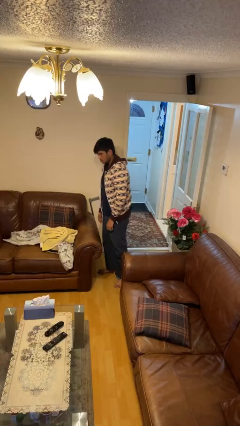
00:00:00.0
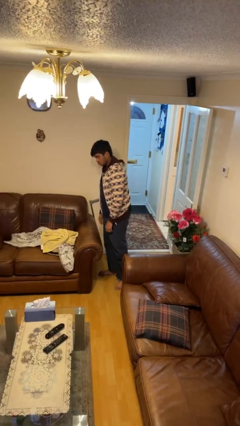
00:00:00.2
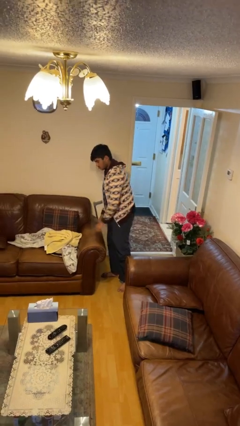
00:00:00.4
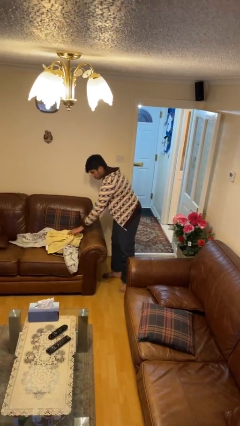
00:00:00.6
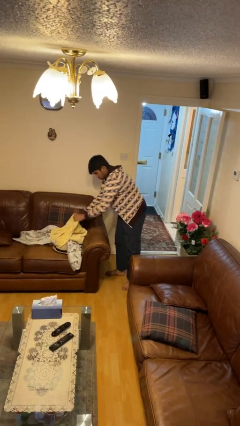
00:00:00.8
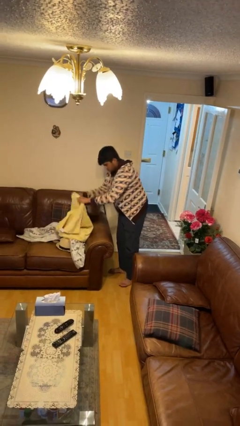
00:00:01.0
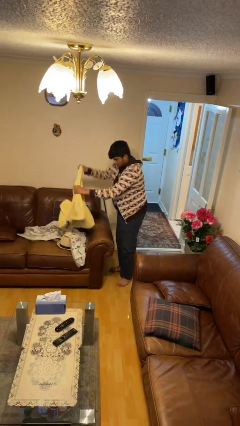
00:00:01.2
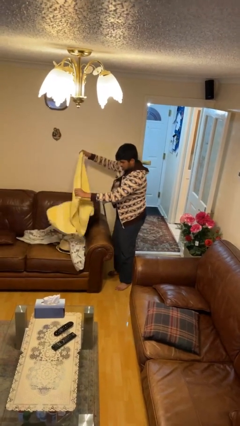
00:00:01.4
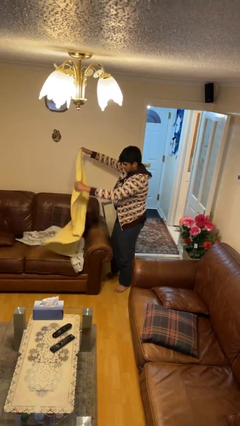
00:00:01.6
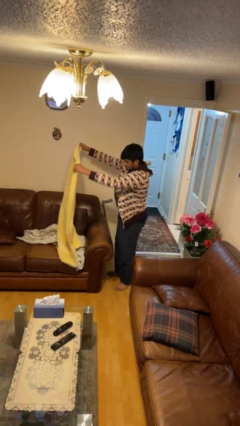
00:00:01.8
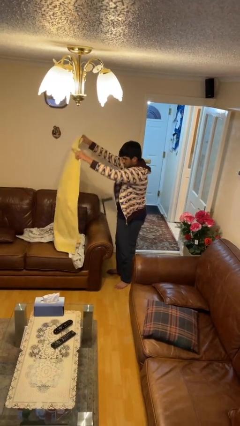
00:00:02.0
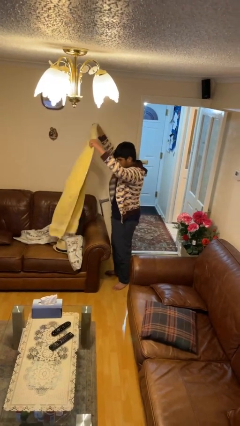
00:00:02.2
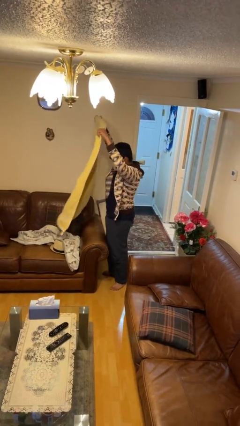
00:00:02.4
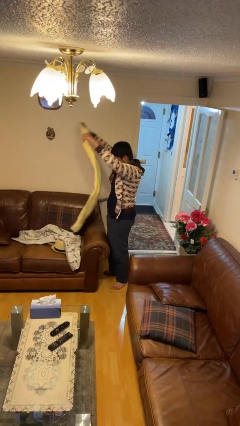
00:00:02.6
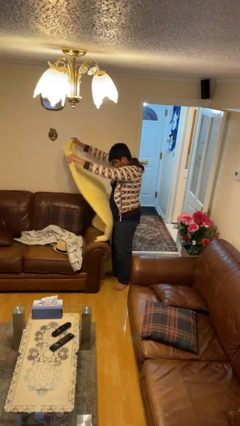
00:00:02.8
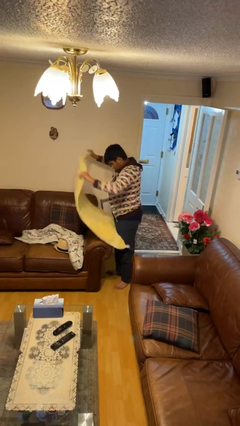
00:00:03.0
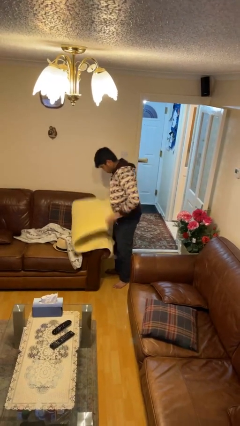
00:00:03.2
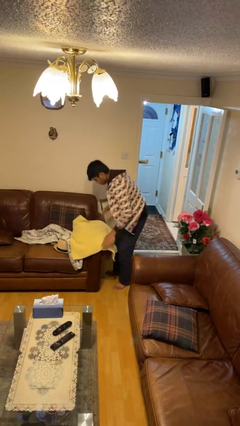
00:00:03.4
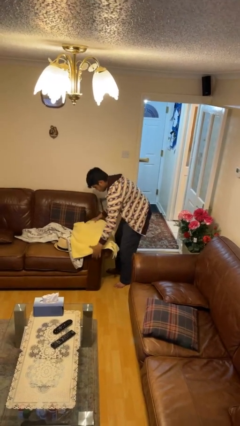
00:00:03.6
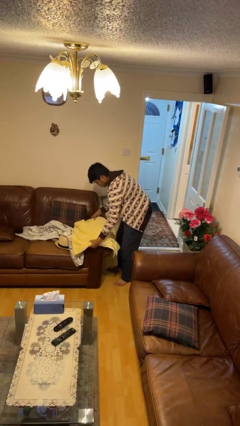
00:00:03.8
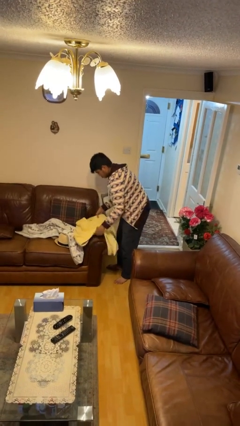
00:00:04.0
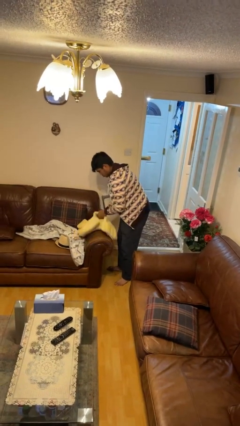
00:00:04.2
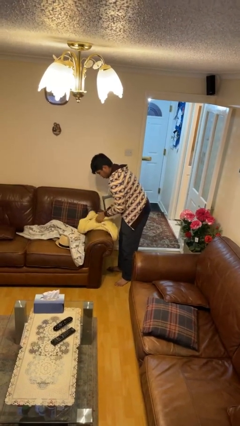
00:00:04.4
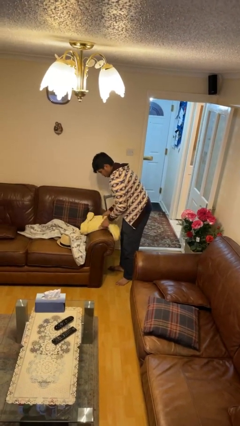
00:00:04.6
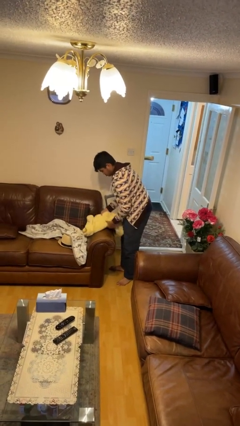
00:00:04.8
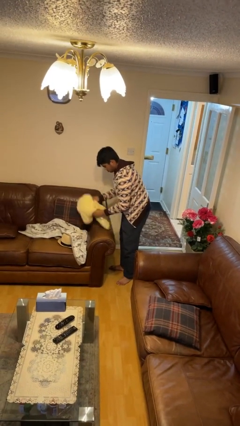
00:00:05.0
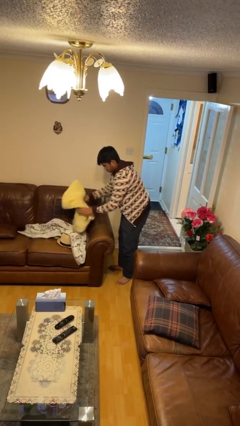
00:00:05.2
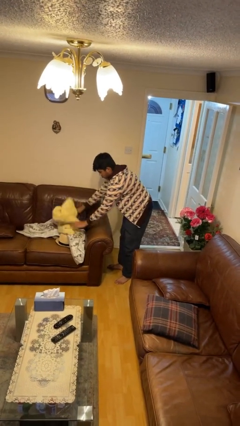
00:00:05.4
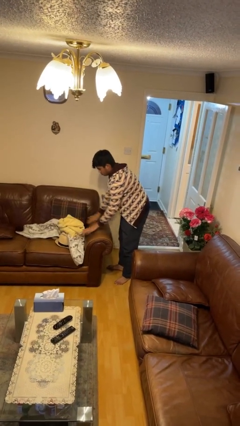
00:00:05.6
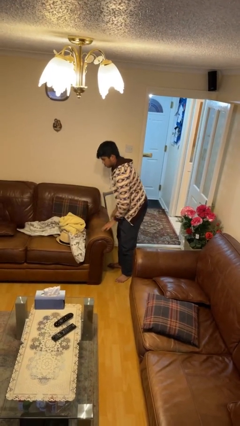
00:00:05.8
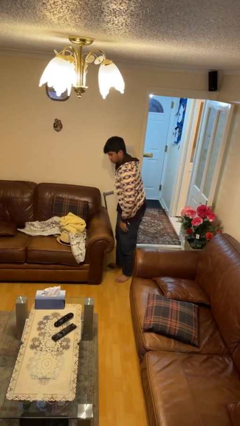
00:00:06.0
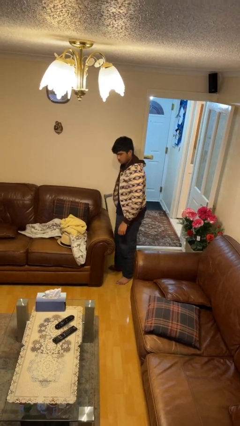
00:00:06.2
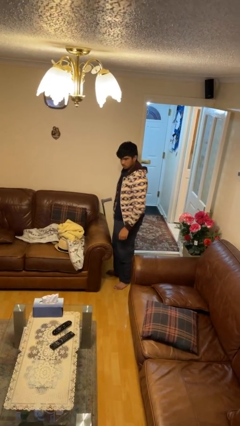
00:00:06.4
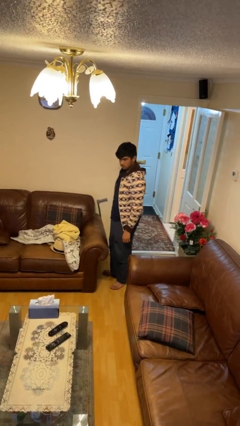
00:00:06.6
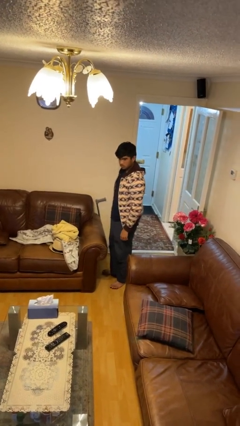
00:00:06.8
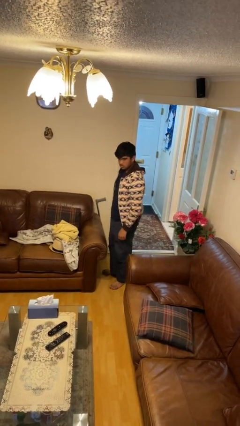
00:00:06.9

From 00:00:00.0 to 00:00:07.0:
person folds towel

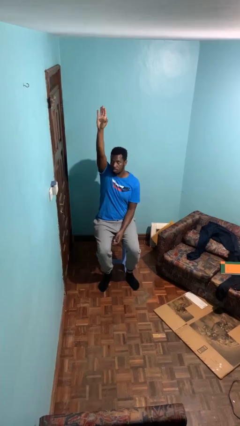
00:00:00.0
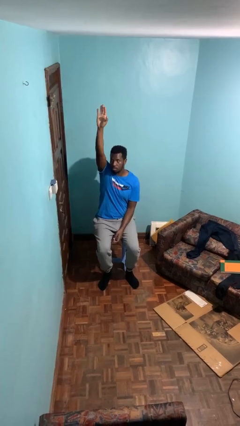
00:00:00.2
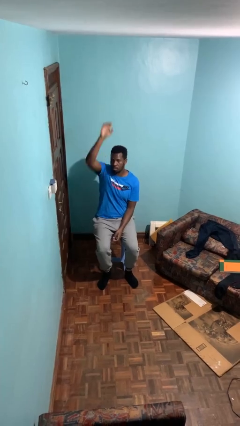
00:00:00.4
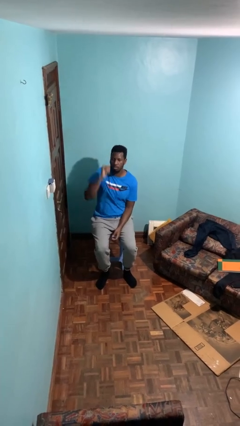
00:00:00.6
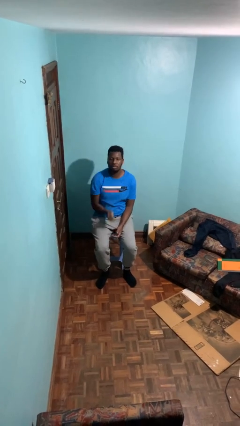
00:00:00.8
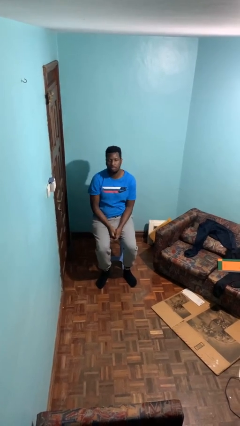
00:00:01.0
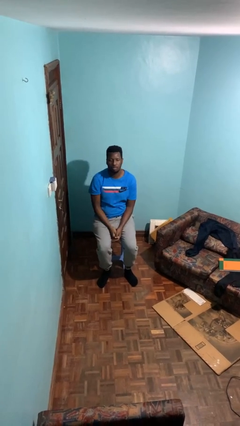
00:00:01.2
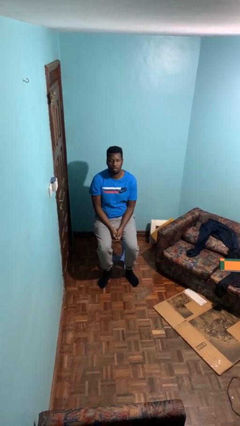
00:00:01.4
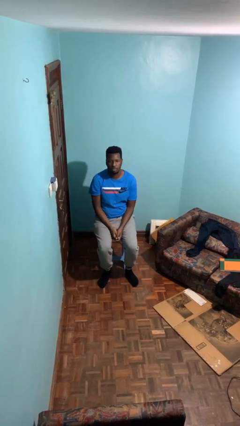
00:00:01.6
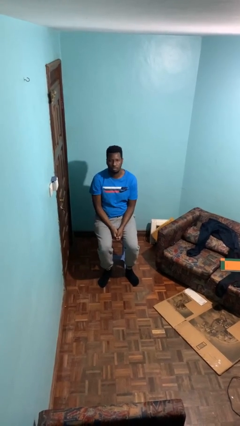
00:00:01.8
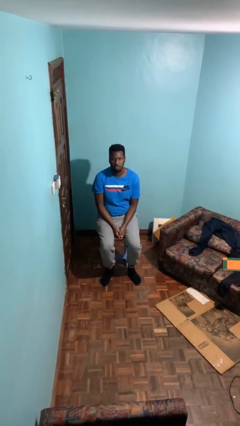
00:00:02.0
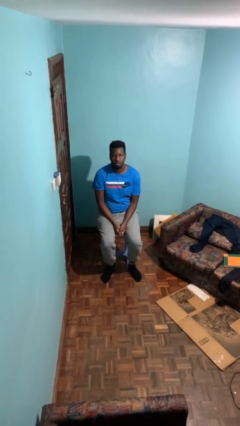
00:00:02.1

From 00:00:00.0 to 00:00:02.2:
person gestures lower hand

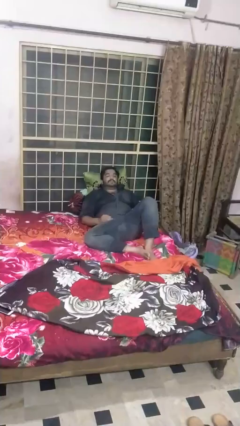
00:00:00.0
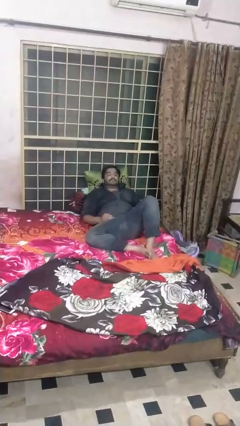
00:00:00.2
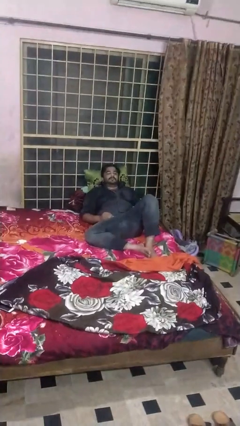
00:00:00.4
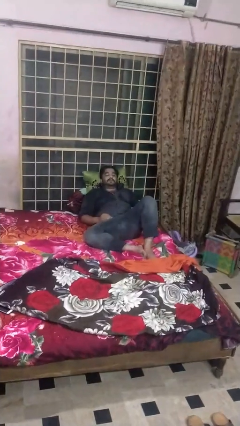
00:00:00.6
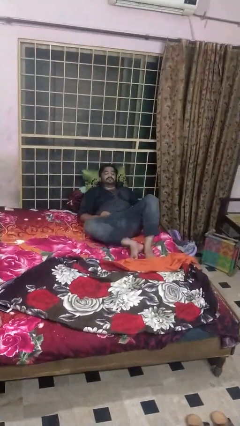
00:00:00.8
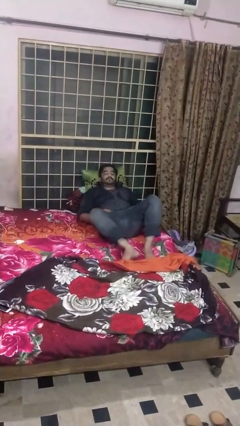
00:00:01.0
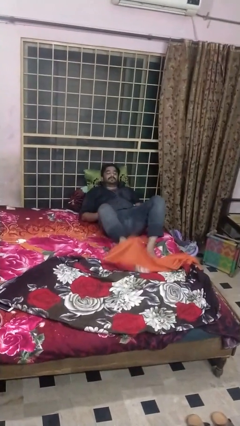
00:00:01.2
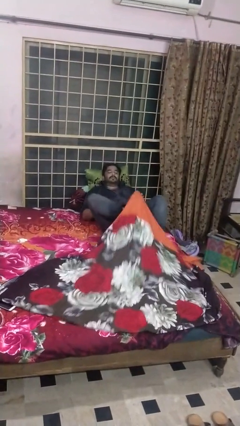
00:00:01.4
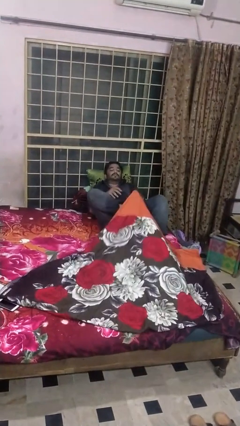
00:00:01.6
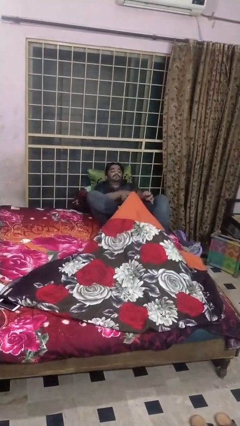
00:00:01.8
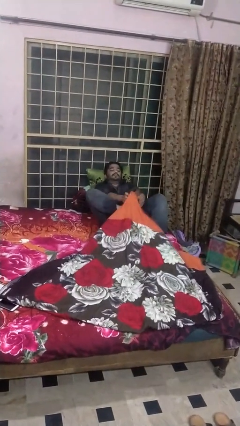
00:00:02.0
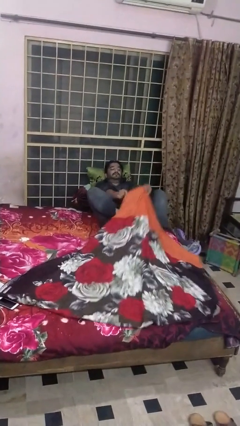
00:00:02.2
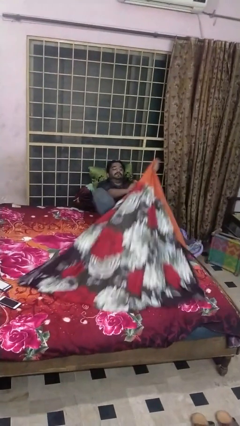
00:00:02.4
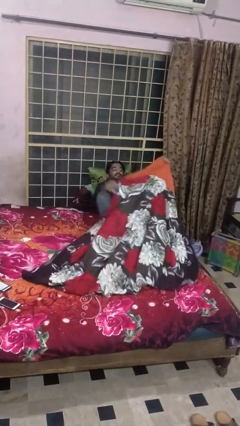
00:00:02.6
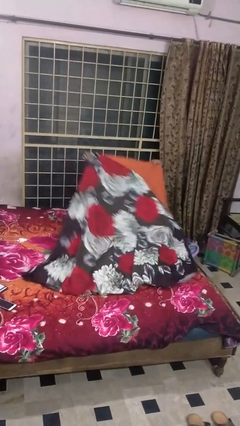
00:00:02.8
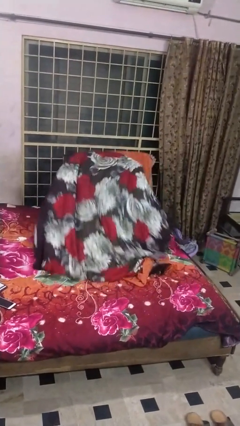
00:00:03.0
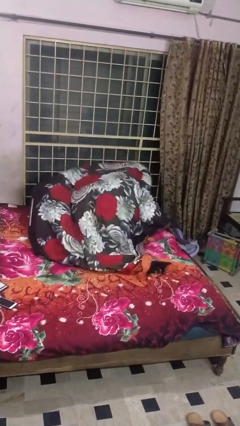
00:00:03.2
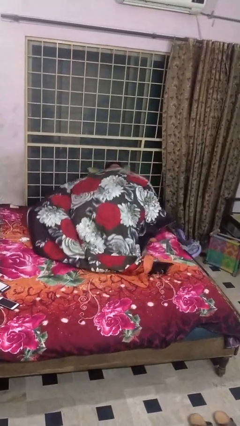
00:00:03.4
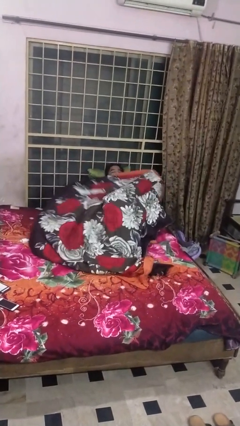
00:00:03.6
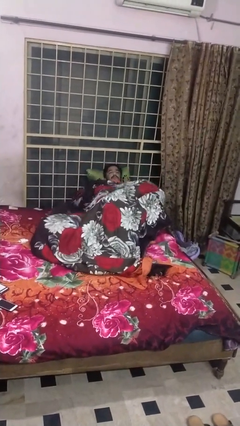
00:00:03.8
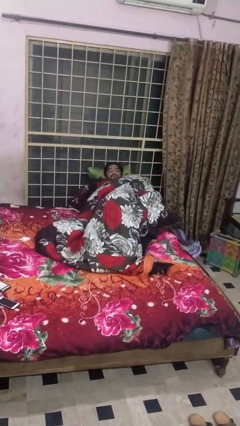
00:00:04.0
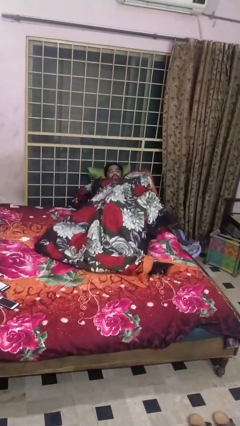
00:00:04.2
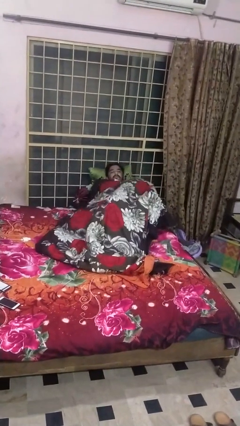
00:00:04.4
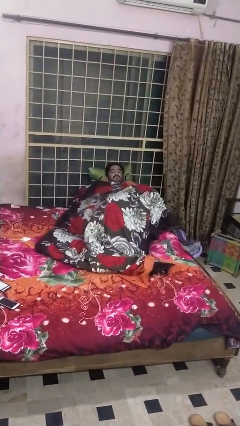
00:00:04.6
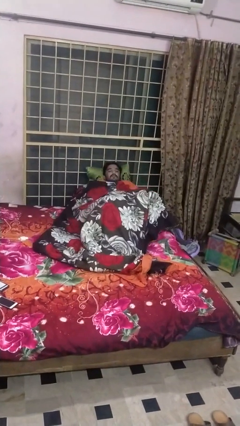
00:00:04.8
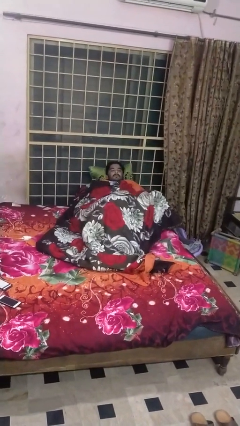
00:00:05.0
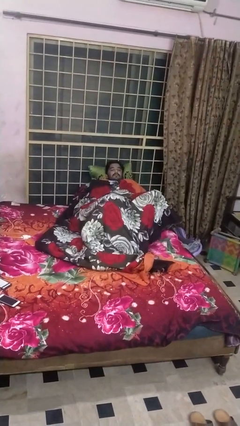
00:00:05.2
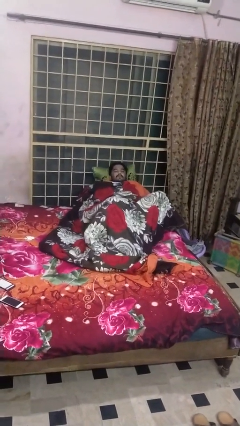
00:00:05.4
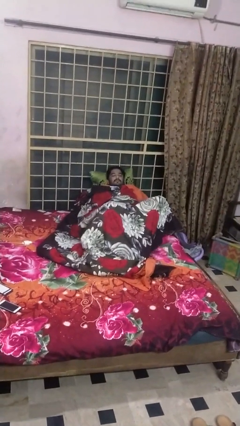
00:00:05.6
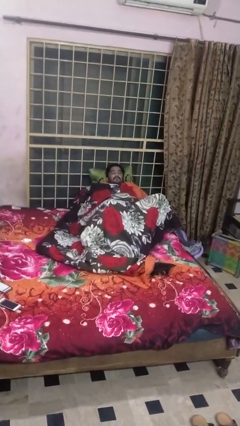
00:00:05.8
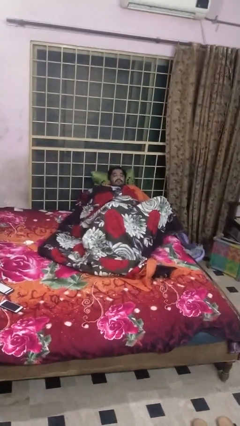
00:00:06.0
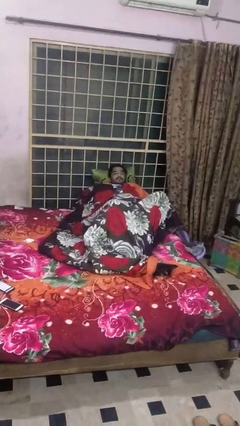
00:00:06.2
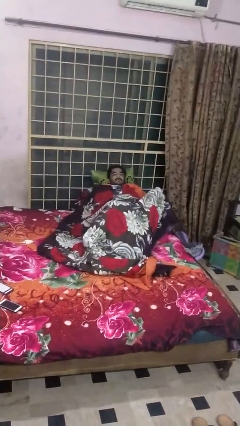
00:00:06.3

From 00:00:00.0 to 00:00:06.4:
person covers with bedsheets

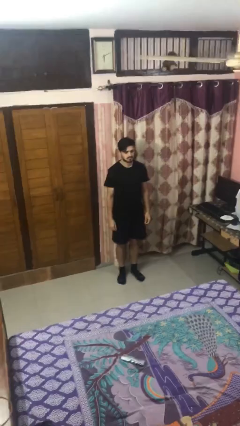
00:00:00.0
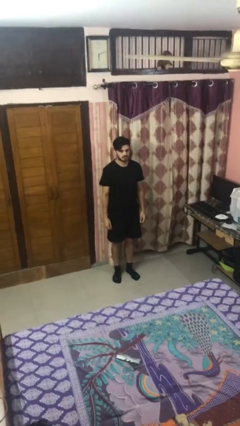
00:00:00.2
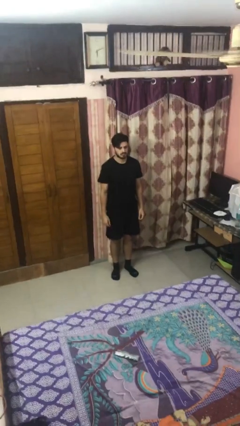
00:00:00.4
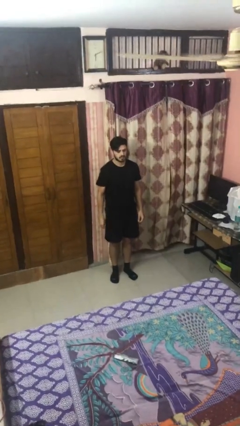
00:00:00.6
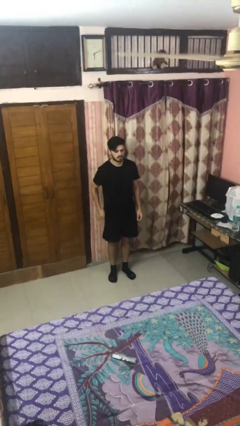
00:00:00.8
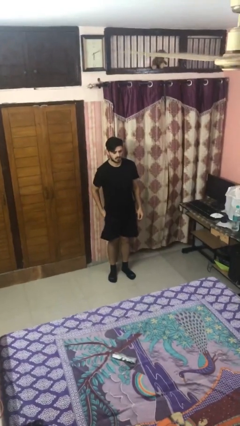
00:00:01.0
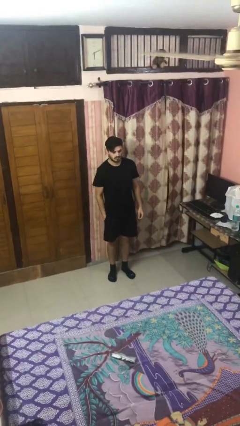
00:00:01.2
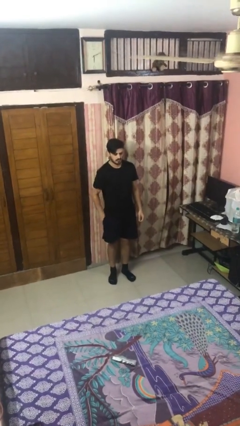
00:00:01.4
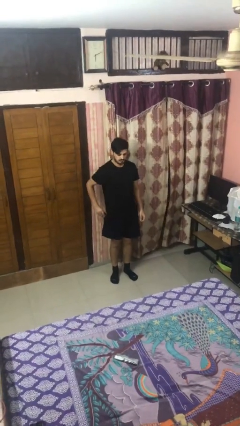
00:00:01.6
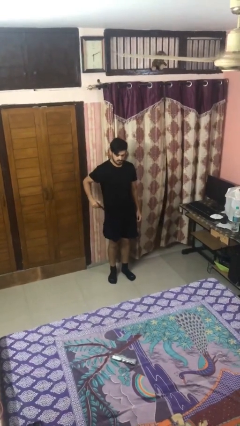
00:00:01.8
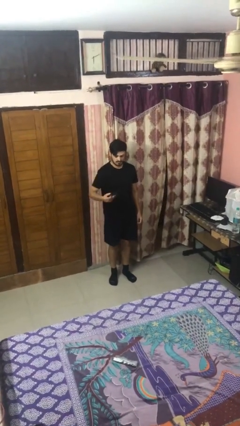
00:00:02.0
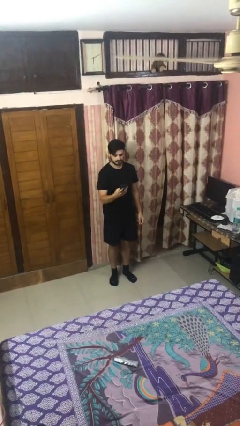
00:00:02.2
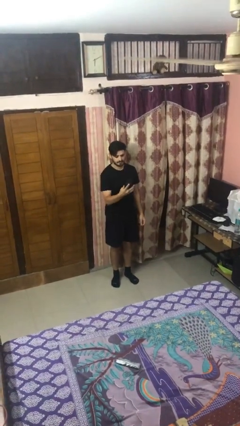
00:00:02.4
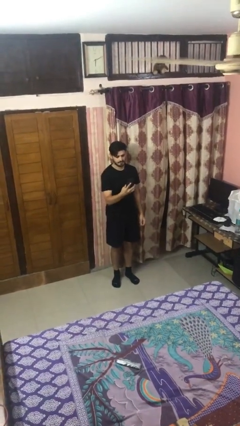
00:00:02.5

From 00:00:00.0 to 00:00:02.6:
person takes phone from pocket
